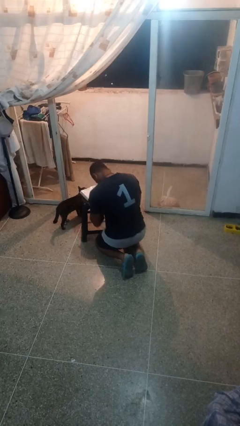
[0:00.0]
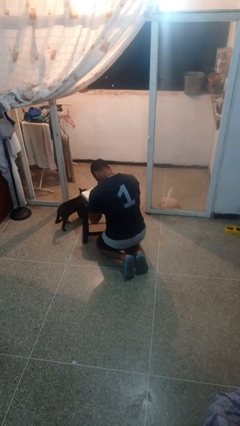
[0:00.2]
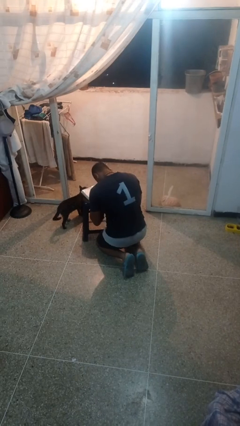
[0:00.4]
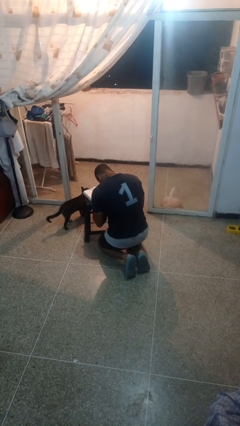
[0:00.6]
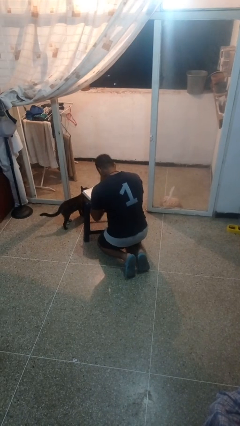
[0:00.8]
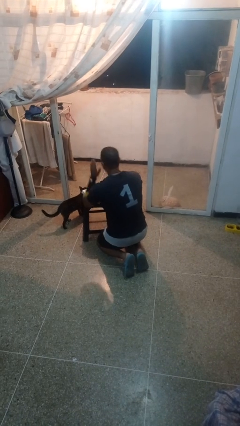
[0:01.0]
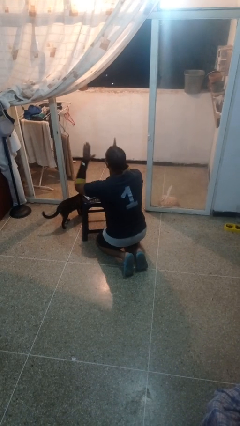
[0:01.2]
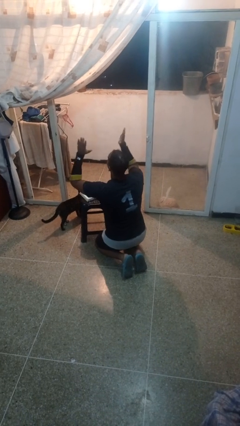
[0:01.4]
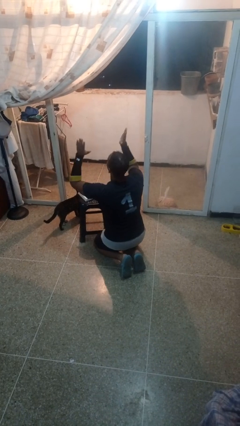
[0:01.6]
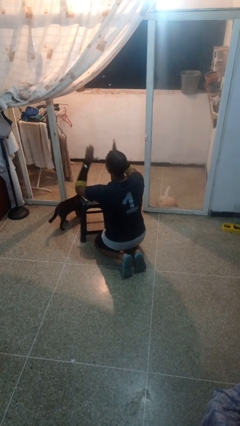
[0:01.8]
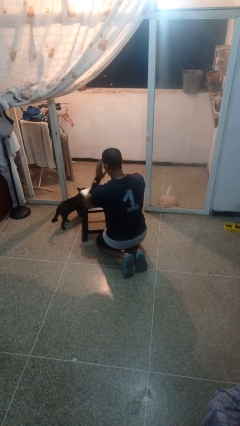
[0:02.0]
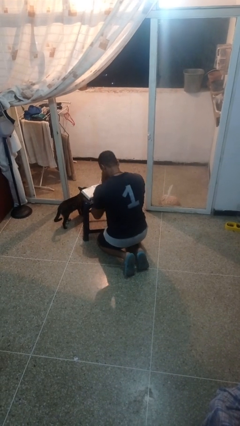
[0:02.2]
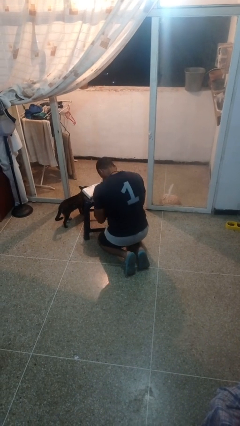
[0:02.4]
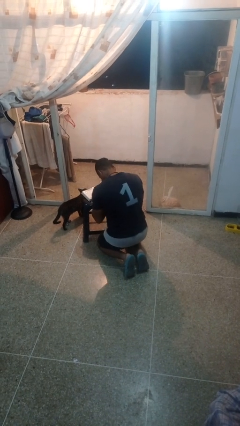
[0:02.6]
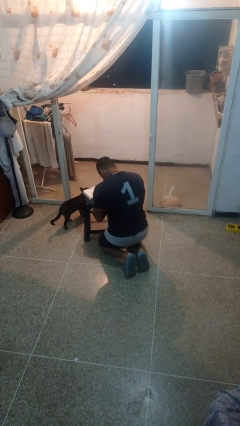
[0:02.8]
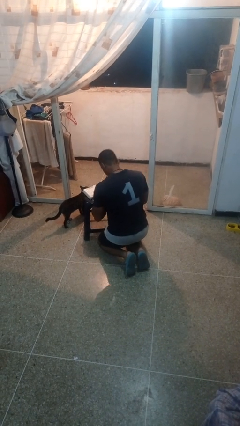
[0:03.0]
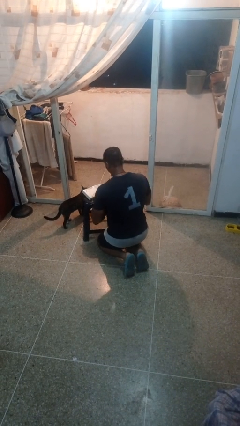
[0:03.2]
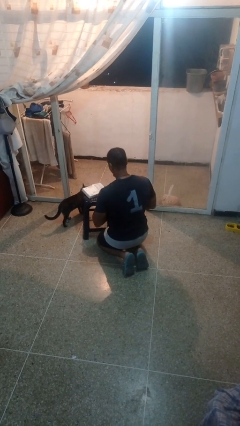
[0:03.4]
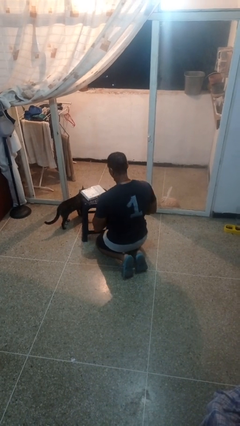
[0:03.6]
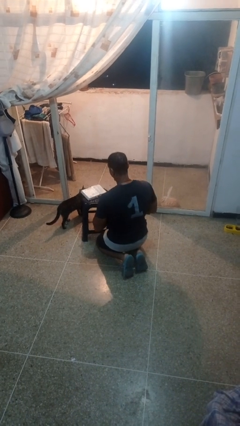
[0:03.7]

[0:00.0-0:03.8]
person prays

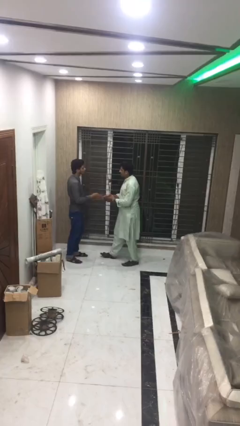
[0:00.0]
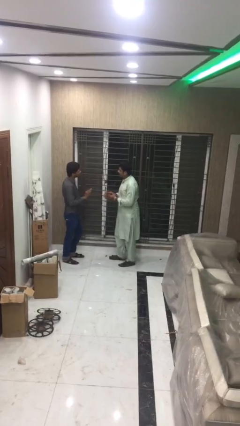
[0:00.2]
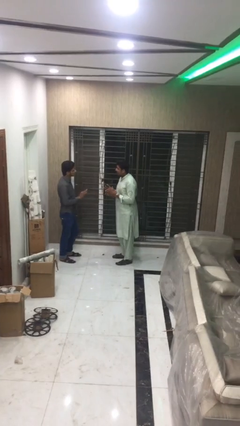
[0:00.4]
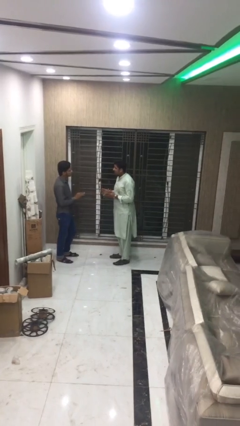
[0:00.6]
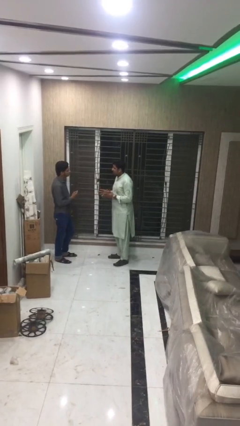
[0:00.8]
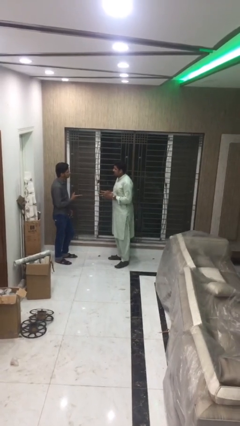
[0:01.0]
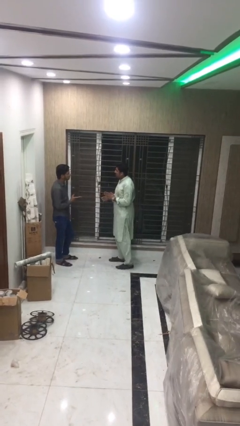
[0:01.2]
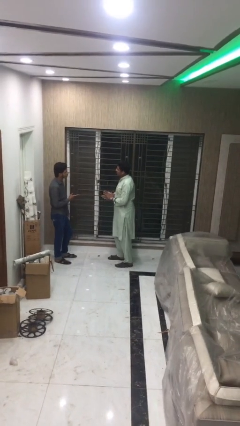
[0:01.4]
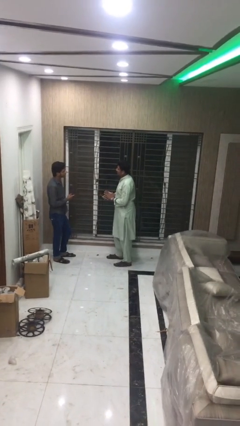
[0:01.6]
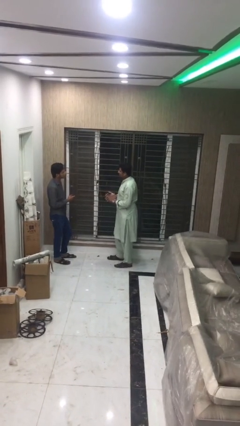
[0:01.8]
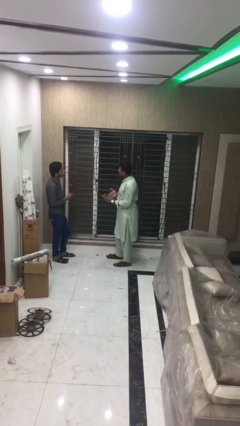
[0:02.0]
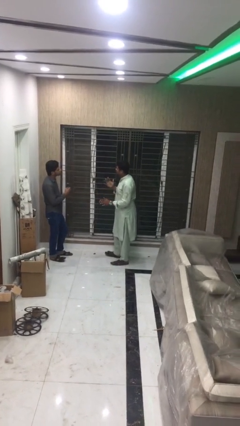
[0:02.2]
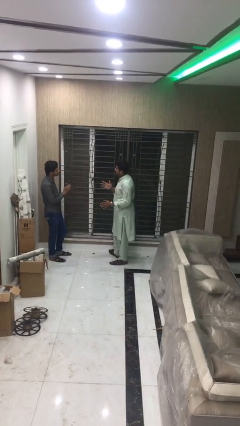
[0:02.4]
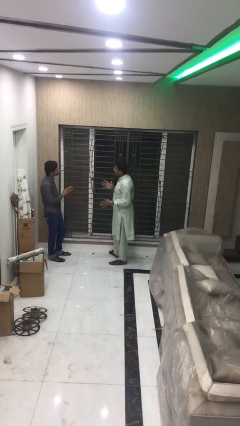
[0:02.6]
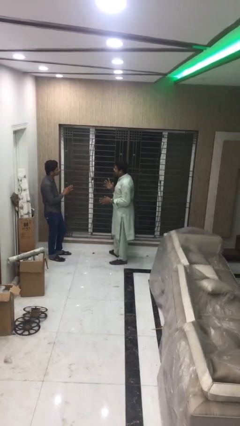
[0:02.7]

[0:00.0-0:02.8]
person talks to person

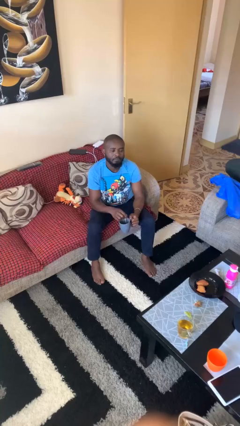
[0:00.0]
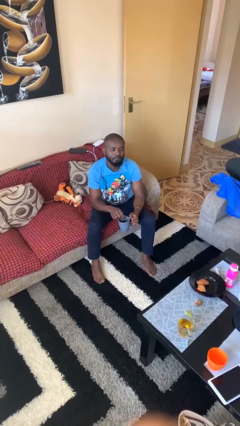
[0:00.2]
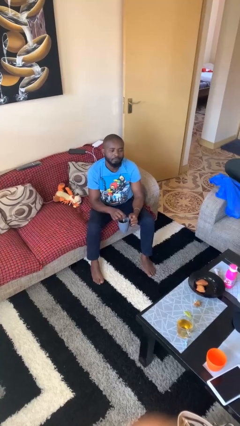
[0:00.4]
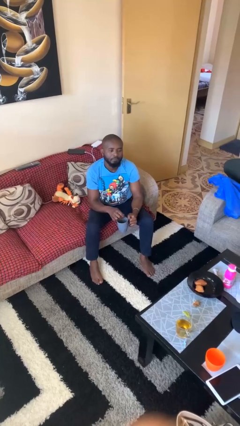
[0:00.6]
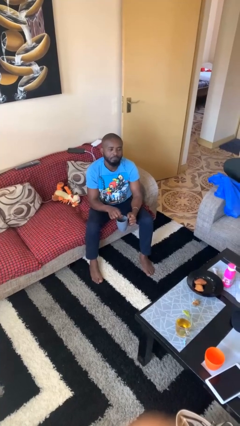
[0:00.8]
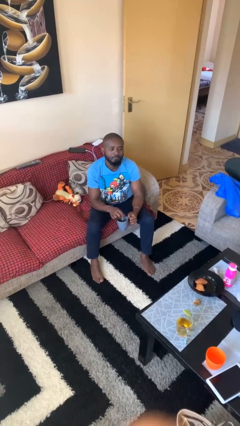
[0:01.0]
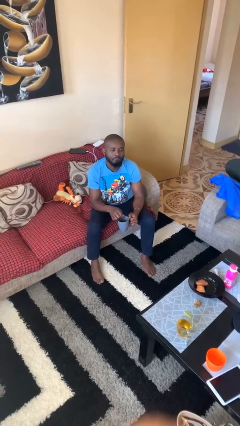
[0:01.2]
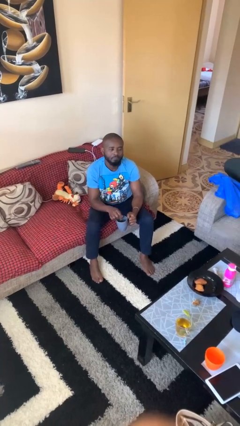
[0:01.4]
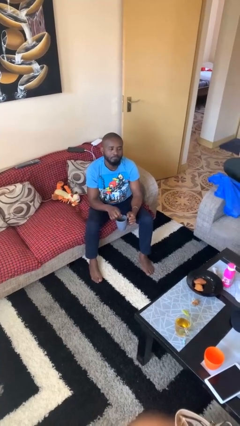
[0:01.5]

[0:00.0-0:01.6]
person stirs mug

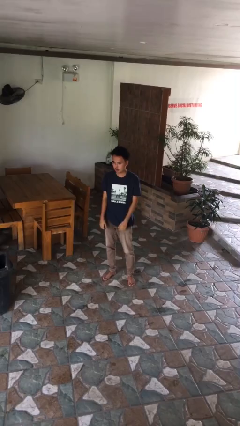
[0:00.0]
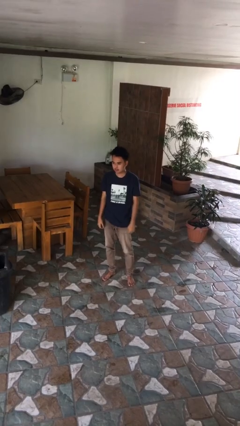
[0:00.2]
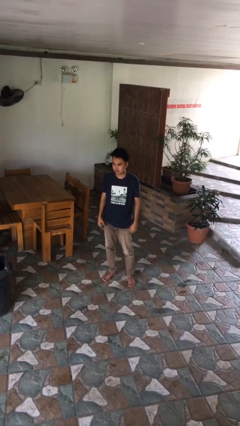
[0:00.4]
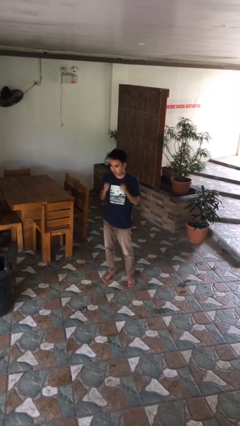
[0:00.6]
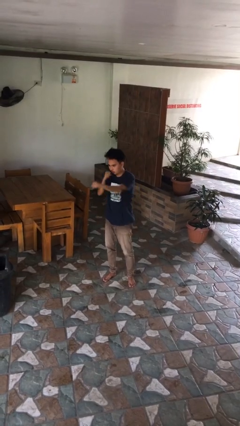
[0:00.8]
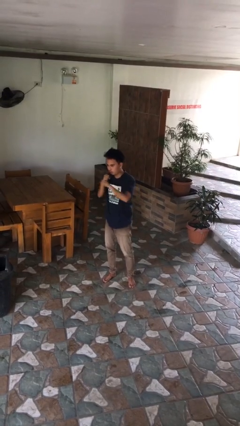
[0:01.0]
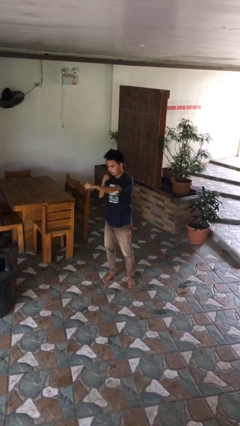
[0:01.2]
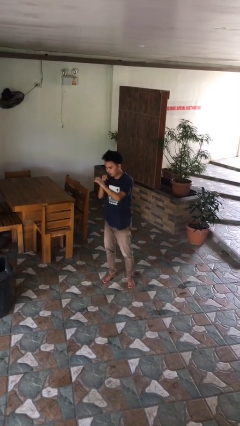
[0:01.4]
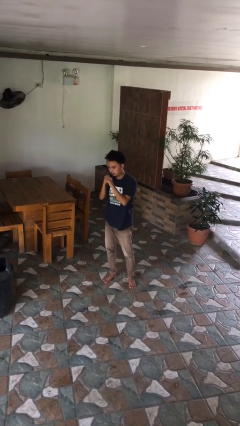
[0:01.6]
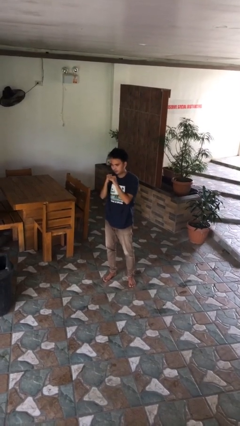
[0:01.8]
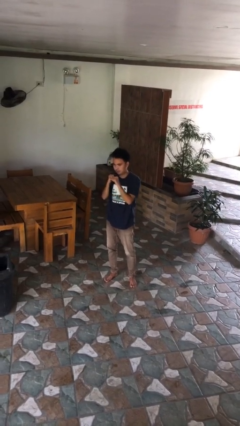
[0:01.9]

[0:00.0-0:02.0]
person punches

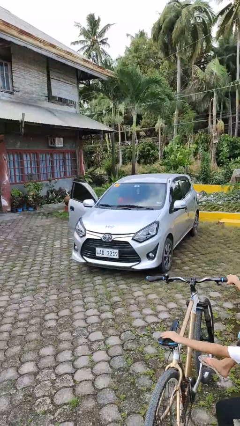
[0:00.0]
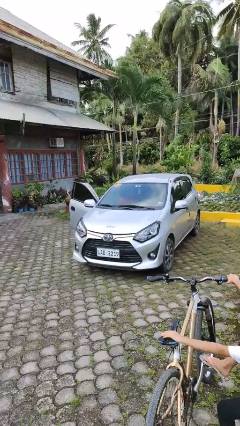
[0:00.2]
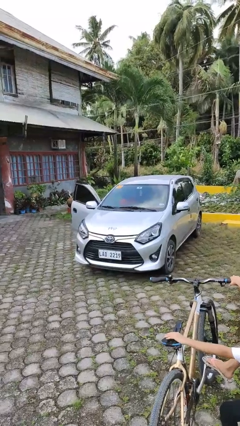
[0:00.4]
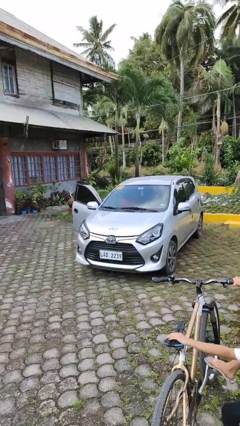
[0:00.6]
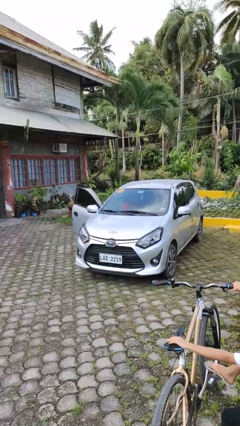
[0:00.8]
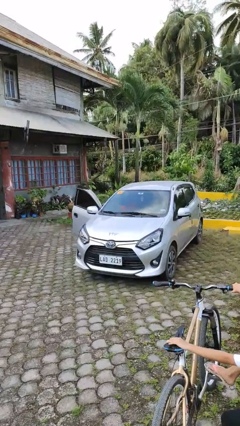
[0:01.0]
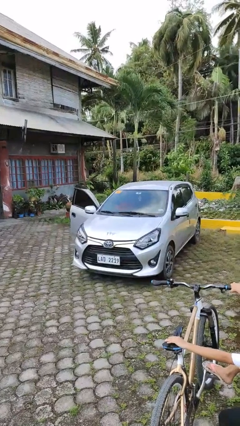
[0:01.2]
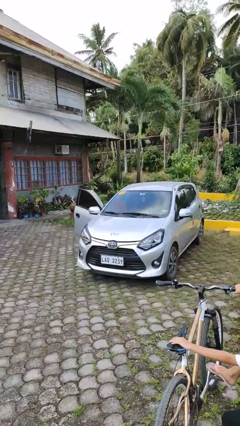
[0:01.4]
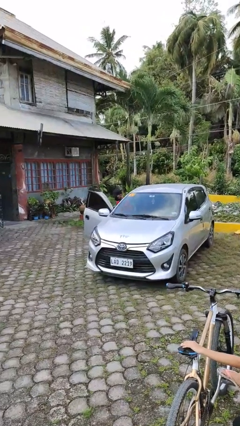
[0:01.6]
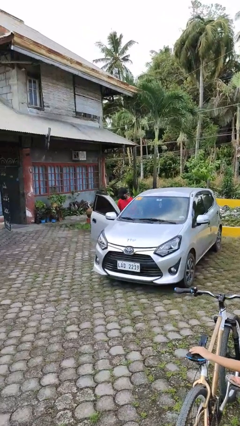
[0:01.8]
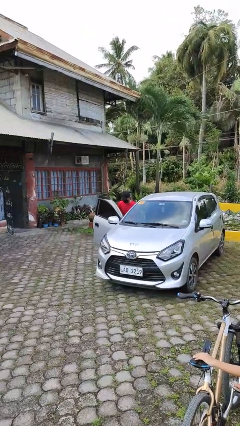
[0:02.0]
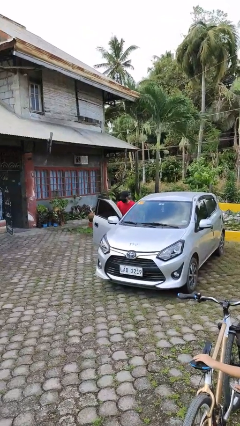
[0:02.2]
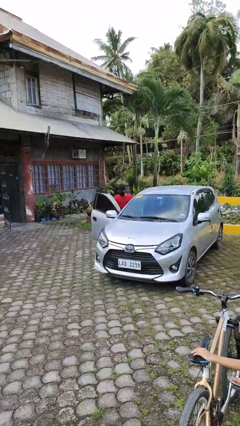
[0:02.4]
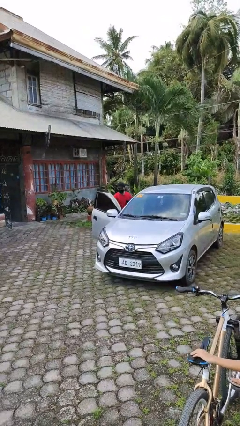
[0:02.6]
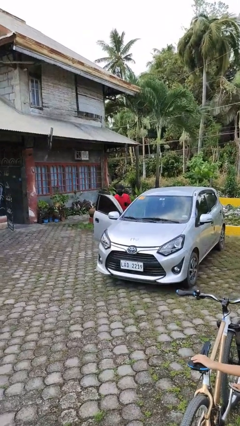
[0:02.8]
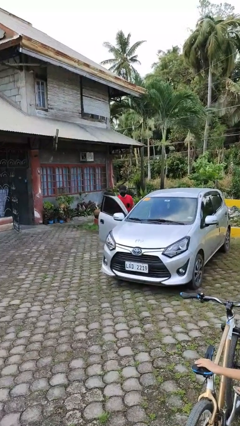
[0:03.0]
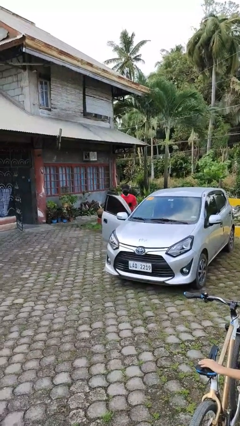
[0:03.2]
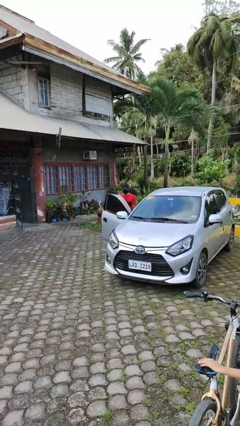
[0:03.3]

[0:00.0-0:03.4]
person exits car

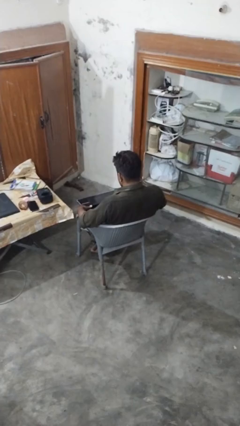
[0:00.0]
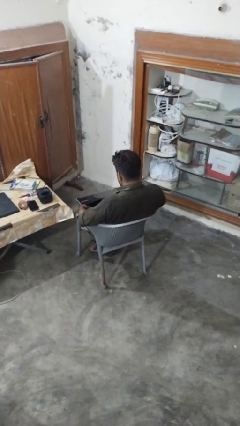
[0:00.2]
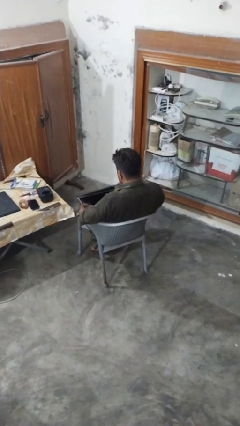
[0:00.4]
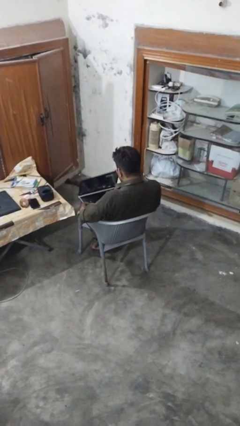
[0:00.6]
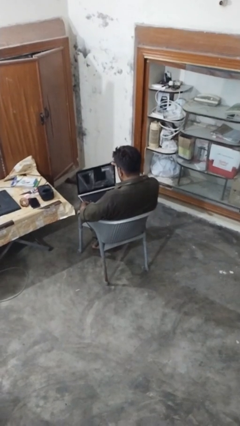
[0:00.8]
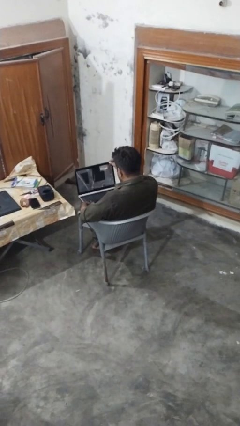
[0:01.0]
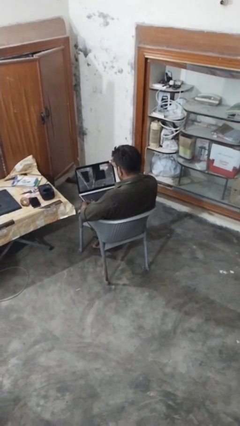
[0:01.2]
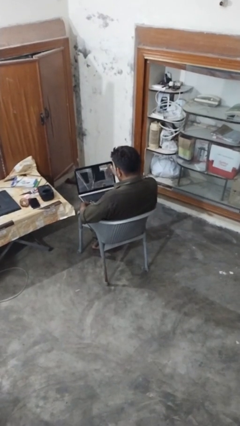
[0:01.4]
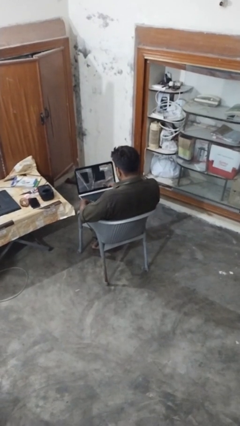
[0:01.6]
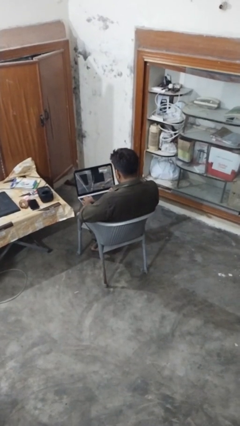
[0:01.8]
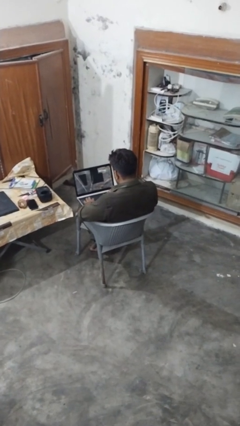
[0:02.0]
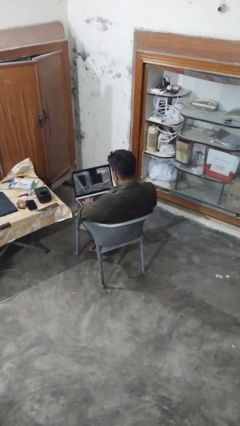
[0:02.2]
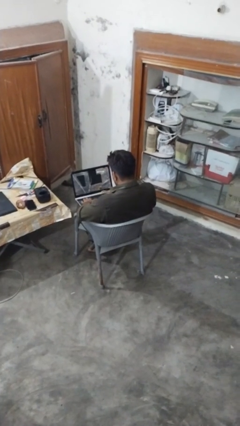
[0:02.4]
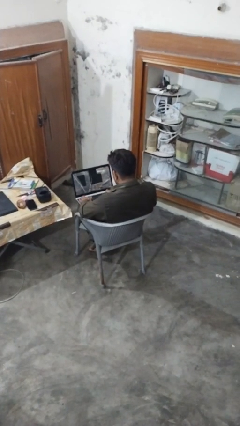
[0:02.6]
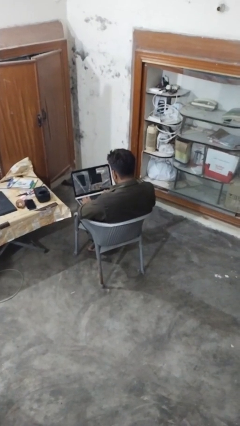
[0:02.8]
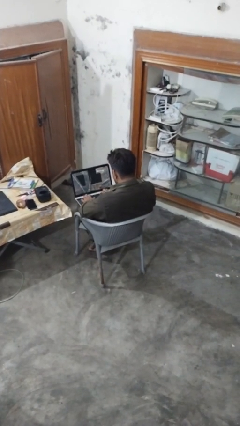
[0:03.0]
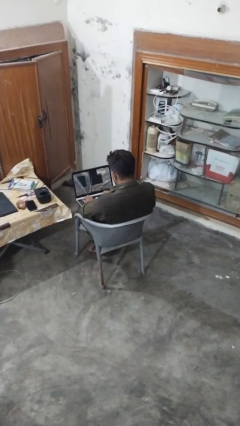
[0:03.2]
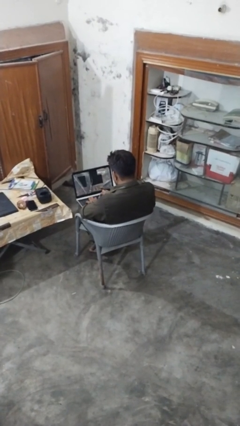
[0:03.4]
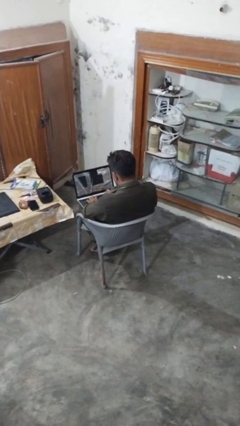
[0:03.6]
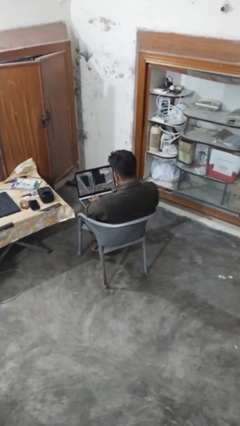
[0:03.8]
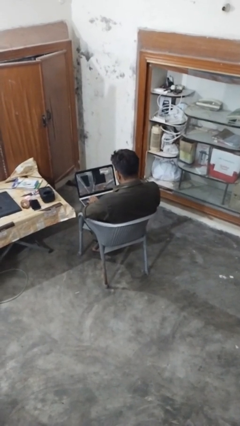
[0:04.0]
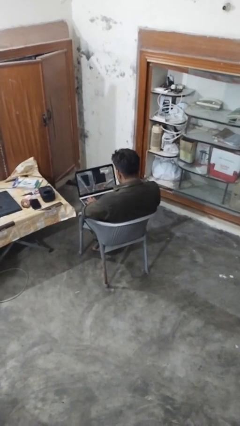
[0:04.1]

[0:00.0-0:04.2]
person opens laptop
